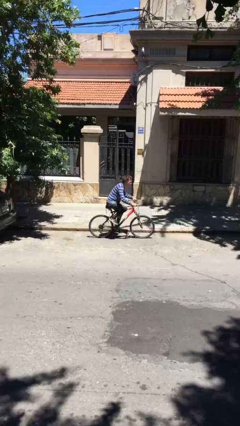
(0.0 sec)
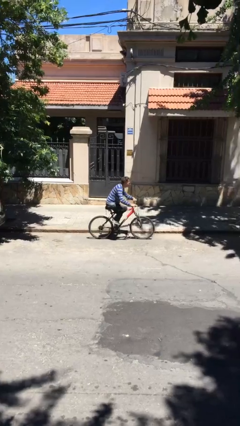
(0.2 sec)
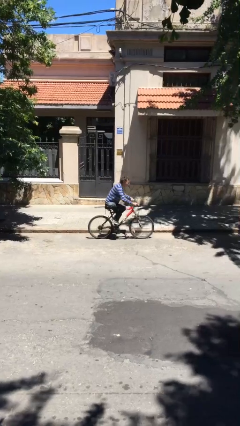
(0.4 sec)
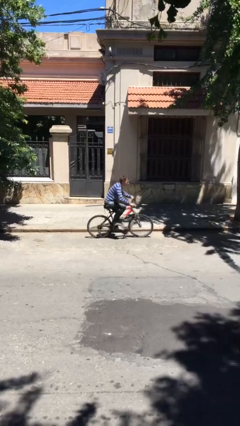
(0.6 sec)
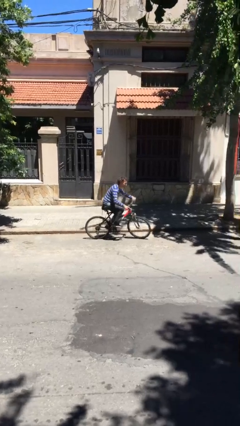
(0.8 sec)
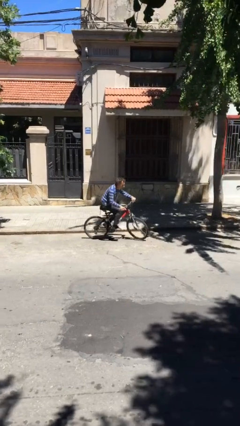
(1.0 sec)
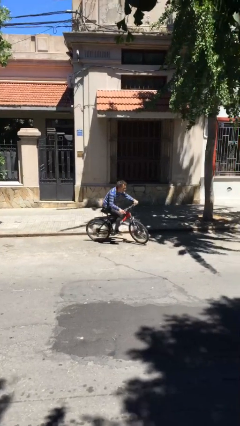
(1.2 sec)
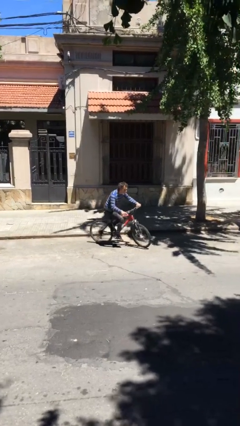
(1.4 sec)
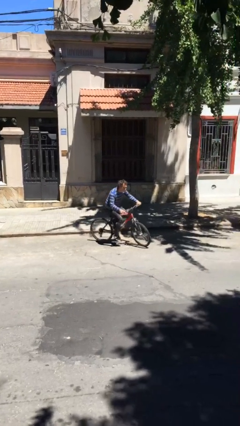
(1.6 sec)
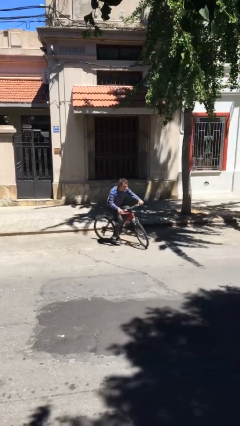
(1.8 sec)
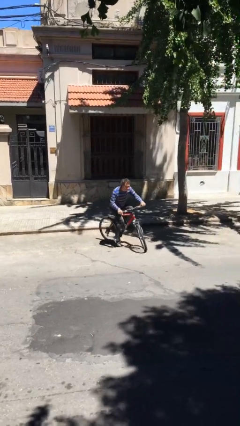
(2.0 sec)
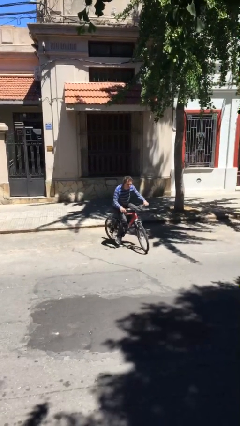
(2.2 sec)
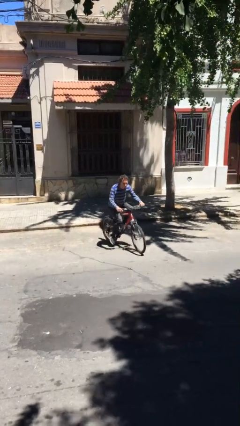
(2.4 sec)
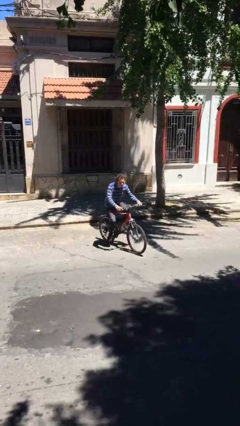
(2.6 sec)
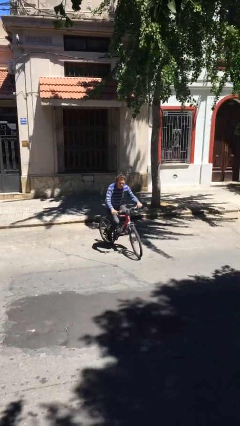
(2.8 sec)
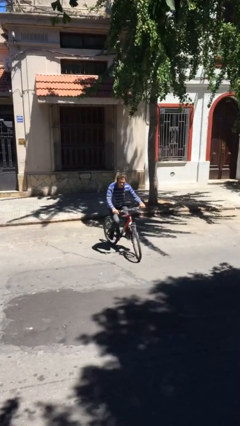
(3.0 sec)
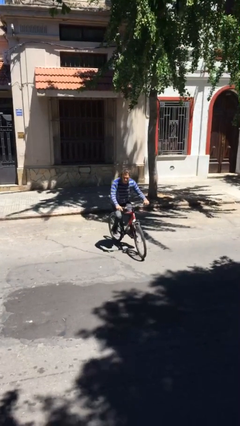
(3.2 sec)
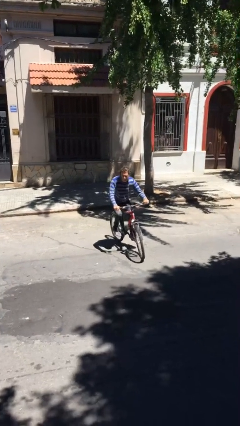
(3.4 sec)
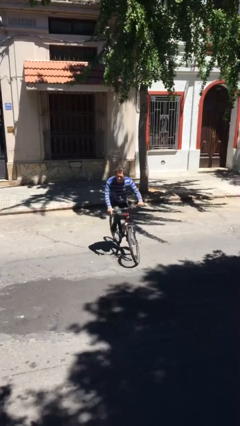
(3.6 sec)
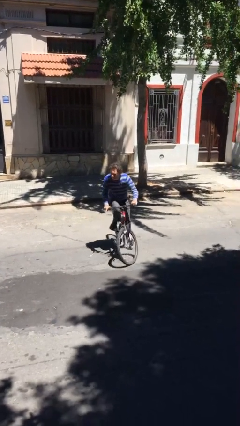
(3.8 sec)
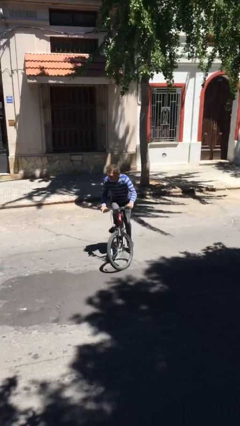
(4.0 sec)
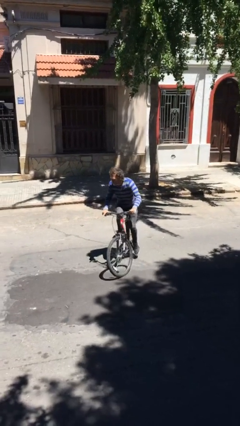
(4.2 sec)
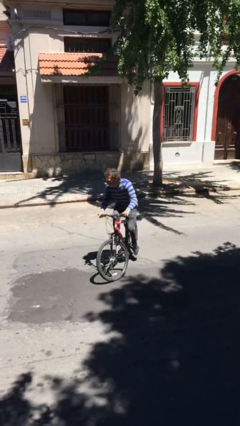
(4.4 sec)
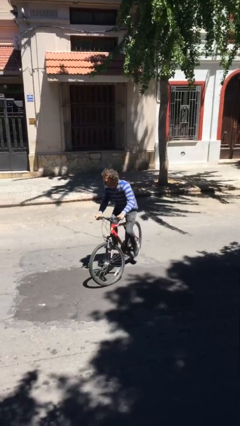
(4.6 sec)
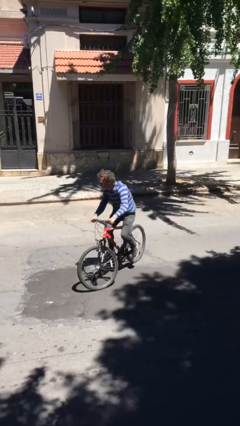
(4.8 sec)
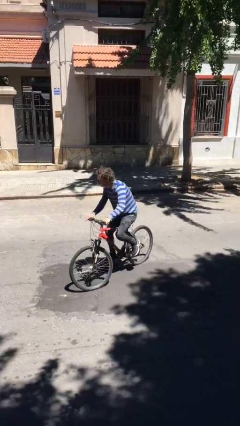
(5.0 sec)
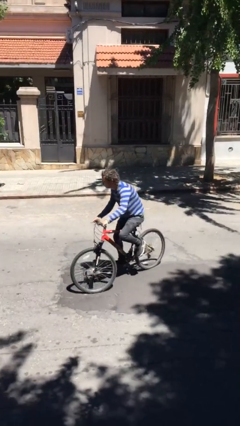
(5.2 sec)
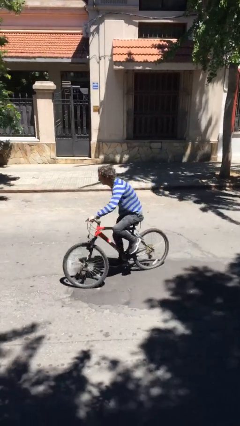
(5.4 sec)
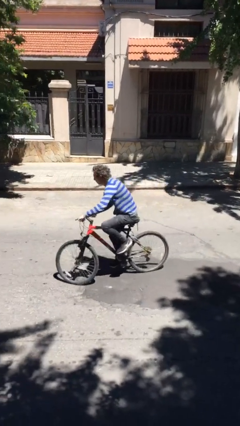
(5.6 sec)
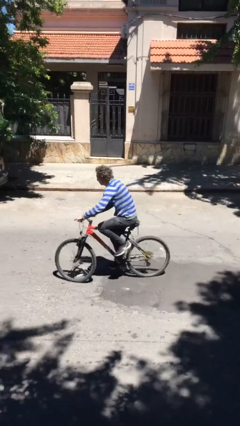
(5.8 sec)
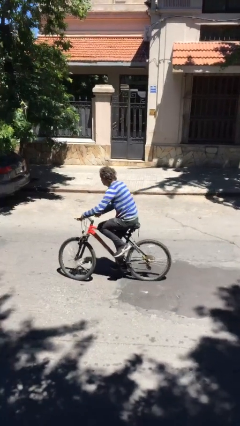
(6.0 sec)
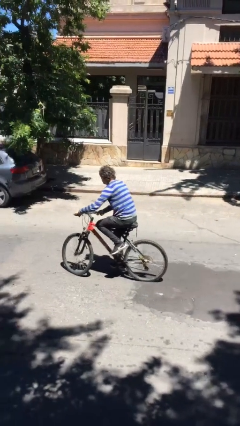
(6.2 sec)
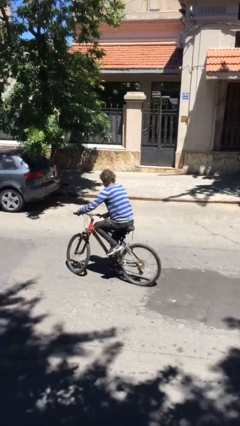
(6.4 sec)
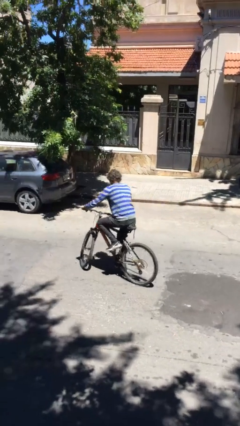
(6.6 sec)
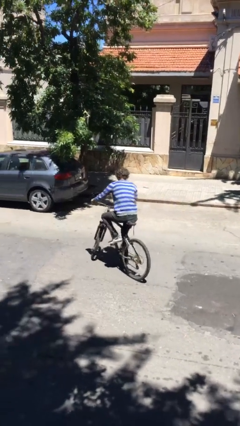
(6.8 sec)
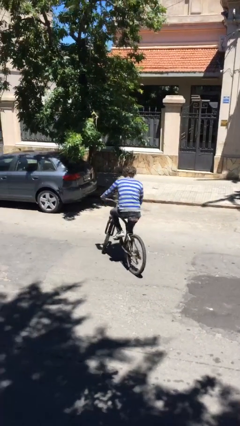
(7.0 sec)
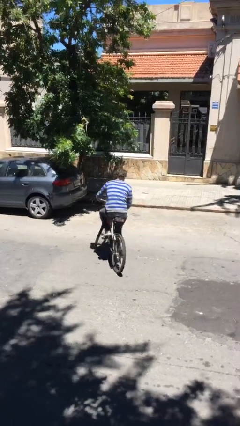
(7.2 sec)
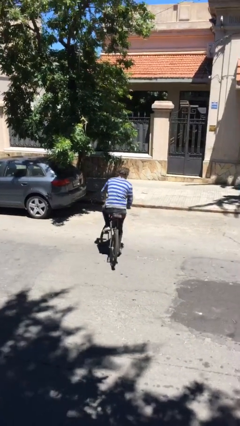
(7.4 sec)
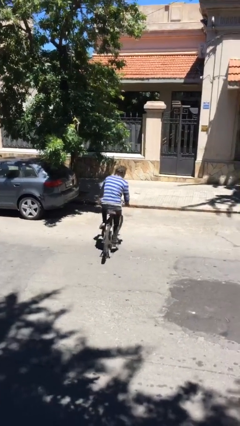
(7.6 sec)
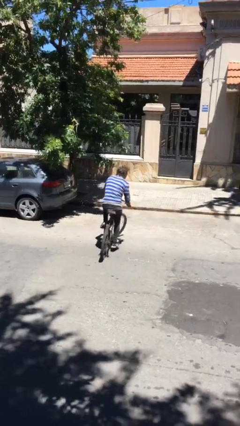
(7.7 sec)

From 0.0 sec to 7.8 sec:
person rides bicycle

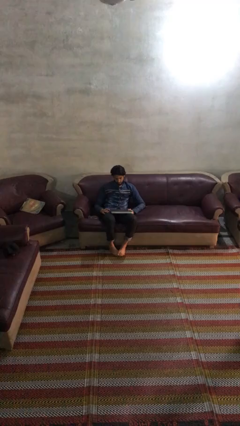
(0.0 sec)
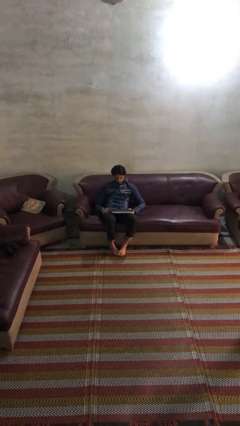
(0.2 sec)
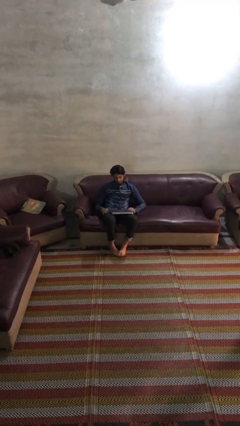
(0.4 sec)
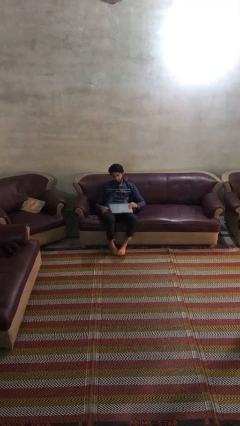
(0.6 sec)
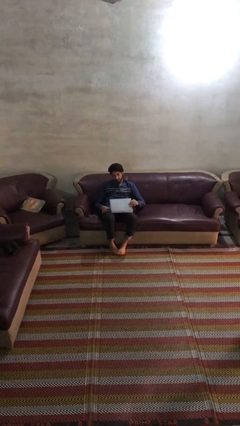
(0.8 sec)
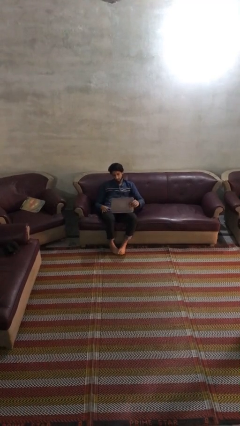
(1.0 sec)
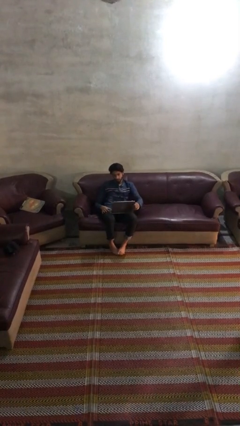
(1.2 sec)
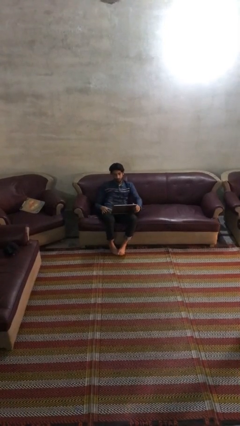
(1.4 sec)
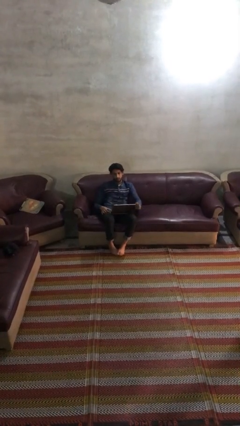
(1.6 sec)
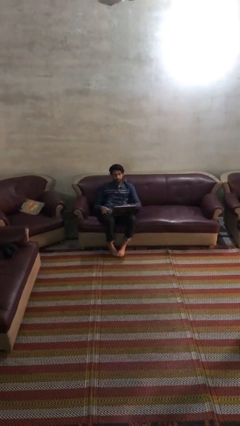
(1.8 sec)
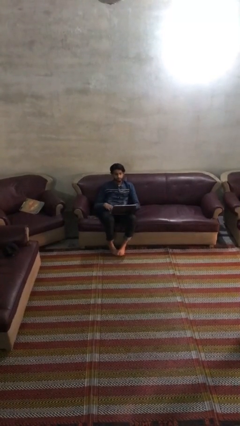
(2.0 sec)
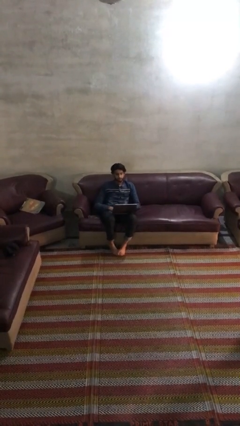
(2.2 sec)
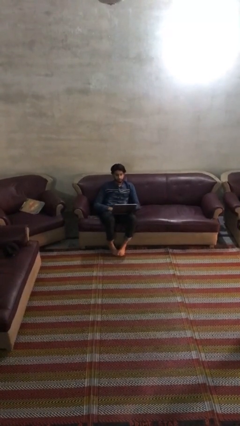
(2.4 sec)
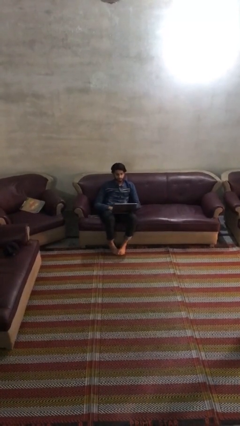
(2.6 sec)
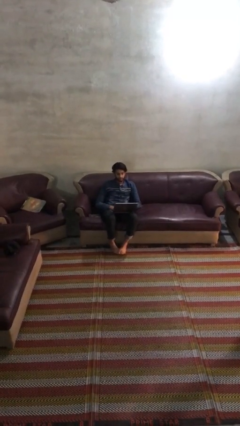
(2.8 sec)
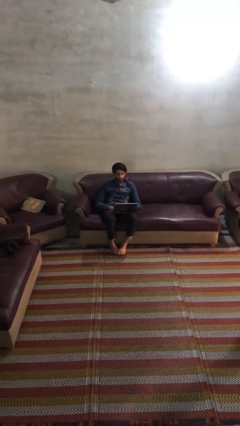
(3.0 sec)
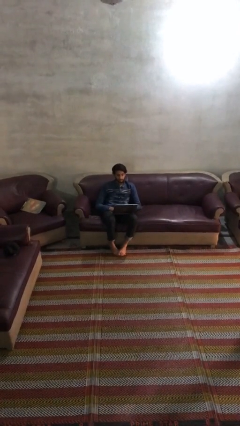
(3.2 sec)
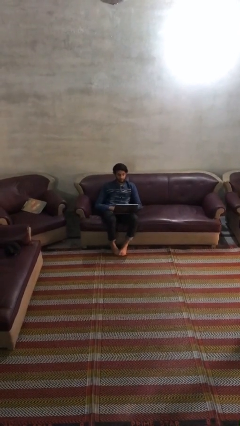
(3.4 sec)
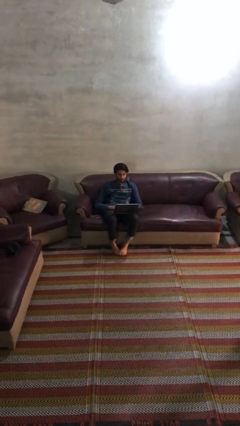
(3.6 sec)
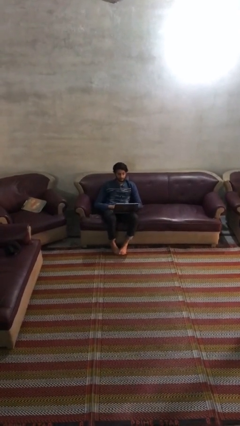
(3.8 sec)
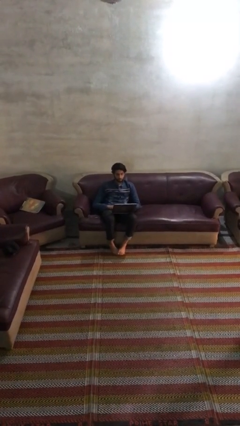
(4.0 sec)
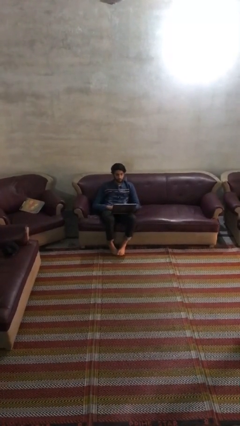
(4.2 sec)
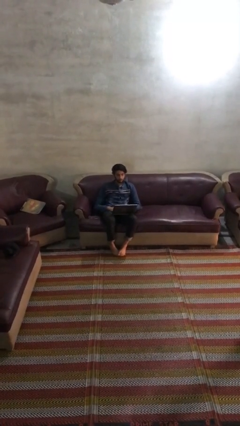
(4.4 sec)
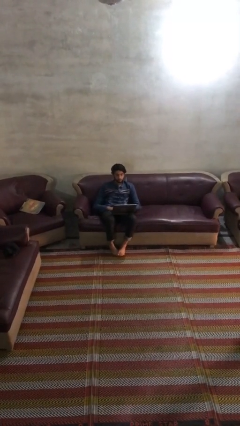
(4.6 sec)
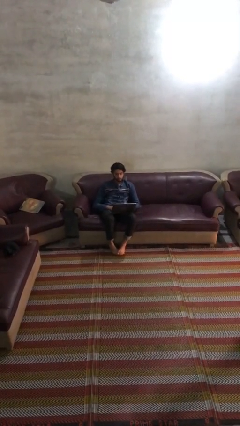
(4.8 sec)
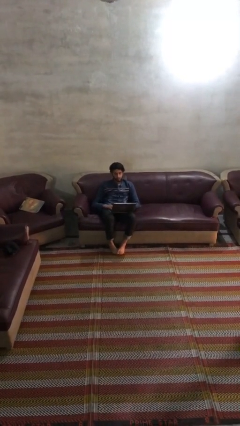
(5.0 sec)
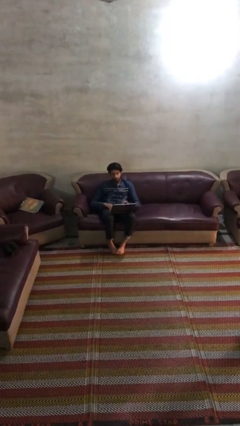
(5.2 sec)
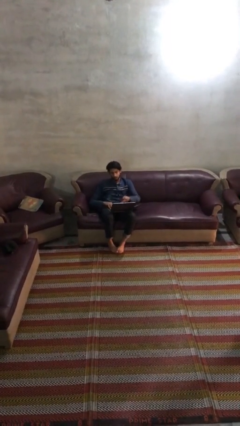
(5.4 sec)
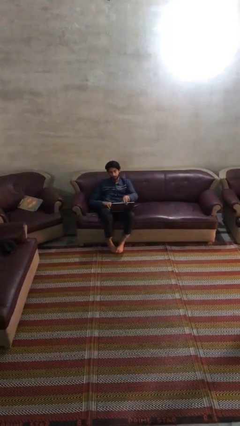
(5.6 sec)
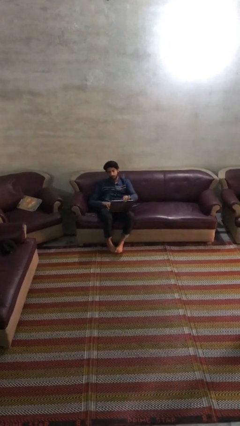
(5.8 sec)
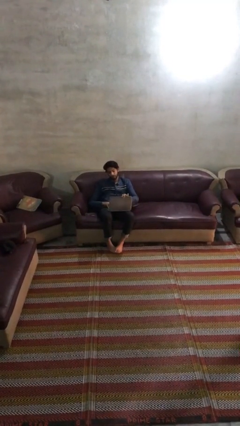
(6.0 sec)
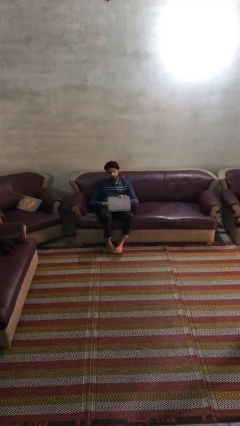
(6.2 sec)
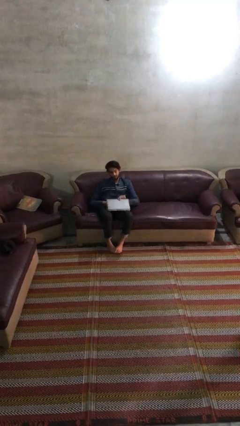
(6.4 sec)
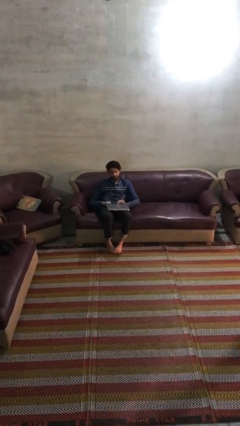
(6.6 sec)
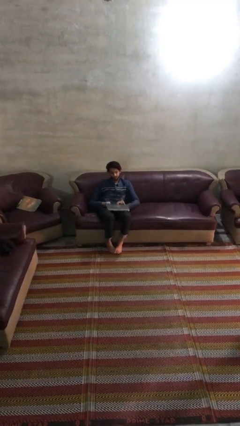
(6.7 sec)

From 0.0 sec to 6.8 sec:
person interacts with laptop

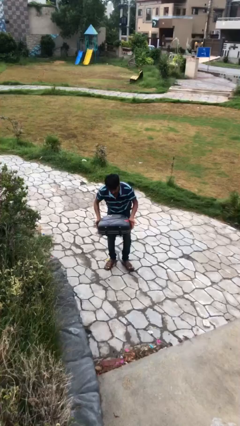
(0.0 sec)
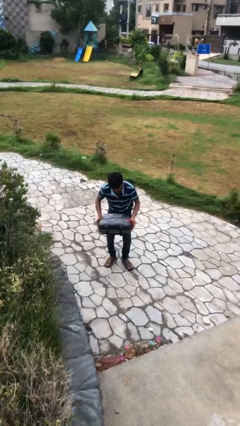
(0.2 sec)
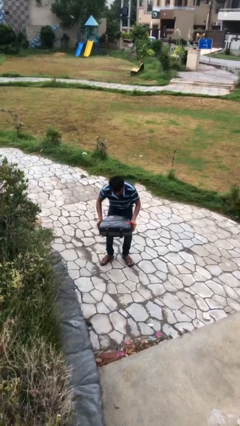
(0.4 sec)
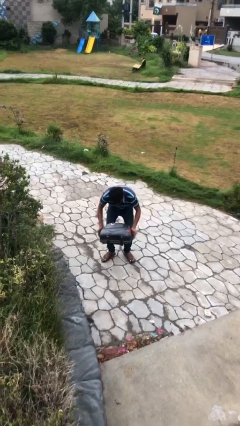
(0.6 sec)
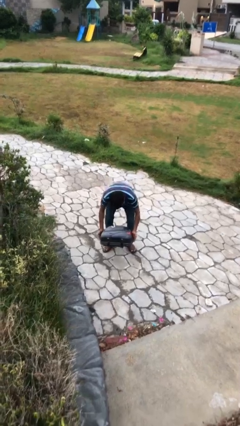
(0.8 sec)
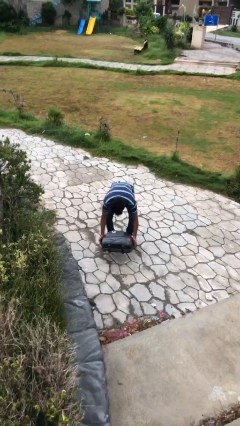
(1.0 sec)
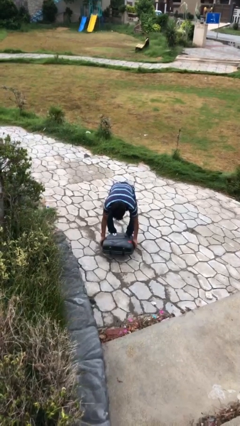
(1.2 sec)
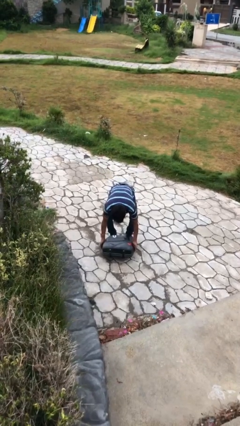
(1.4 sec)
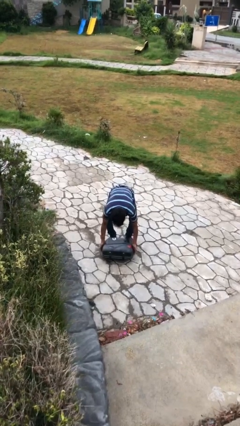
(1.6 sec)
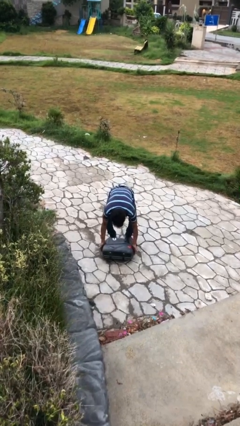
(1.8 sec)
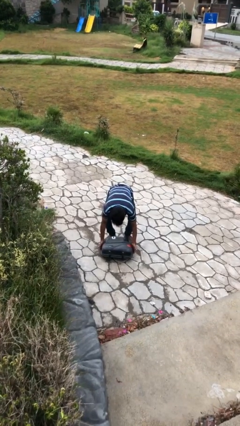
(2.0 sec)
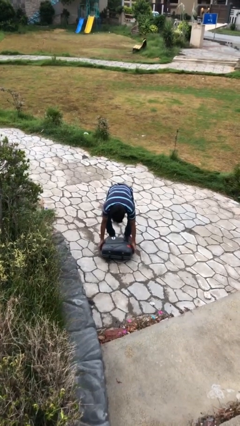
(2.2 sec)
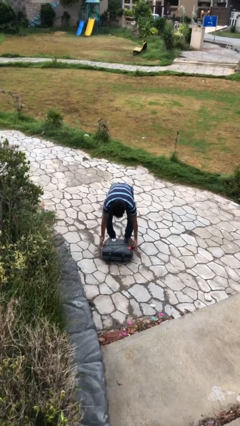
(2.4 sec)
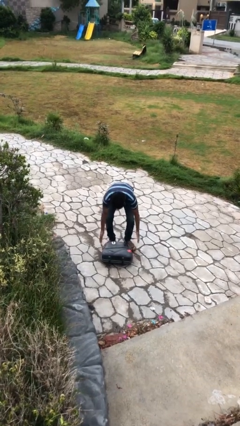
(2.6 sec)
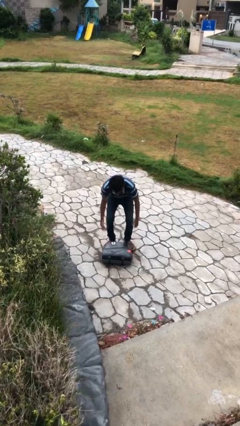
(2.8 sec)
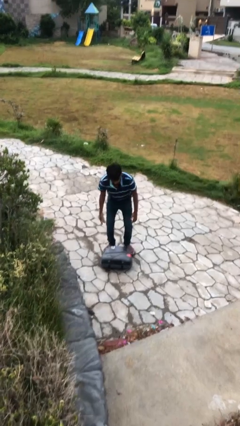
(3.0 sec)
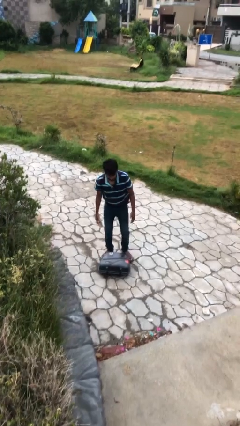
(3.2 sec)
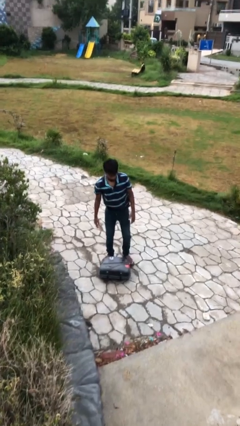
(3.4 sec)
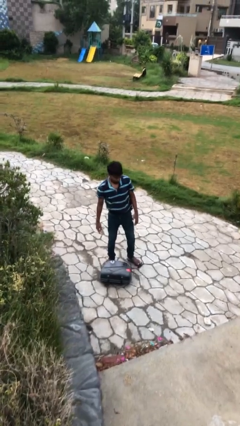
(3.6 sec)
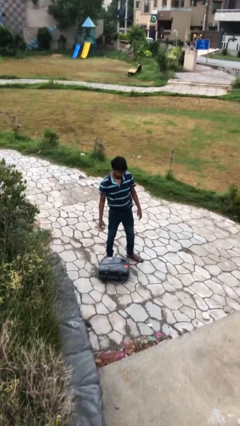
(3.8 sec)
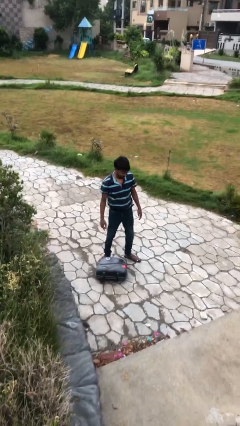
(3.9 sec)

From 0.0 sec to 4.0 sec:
person puts down object on floor
